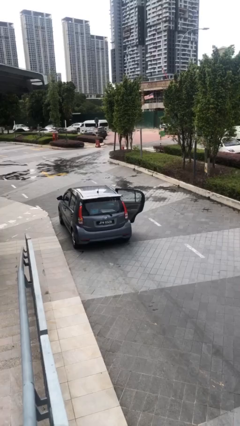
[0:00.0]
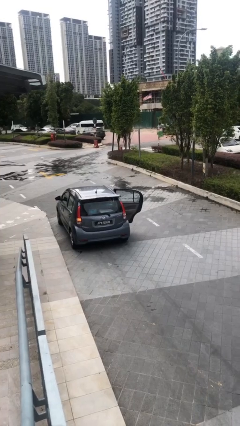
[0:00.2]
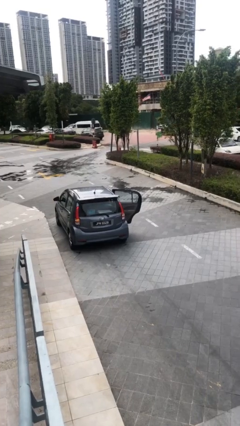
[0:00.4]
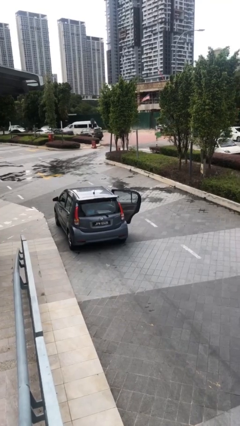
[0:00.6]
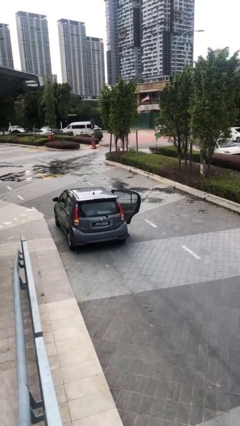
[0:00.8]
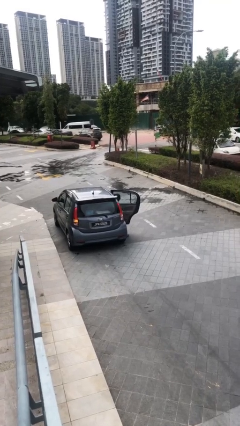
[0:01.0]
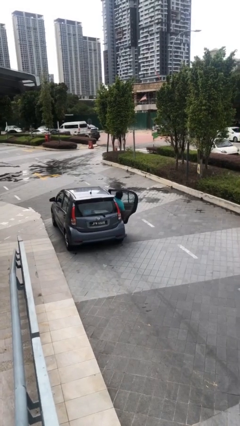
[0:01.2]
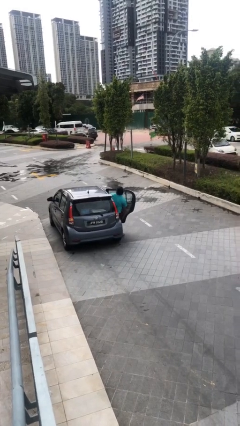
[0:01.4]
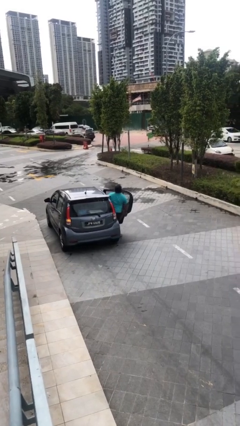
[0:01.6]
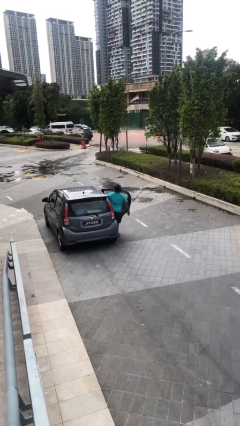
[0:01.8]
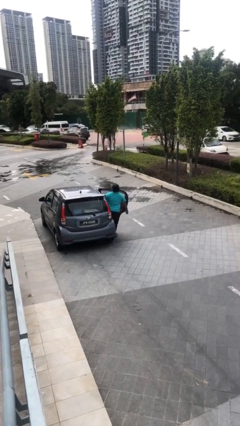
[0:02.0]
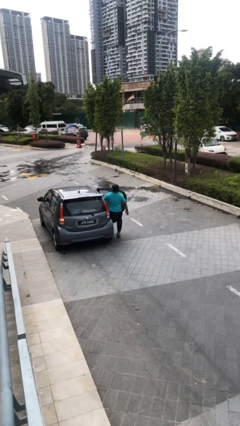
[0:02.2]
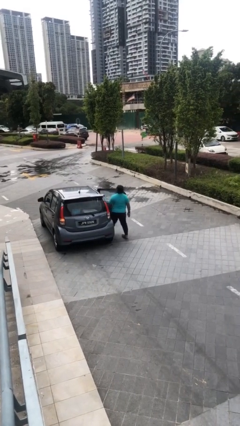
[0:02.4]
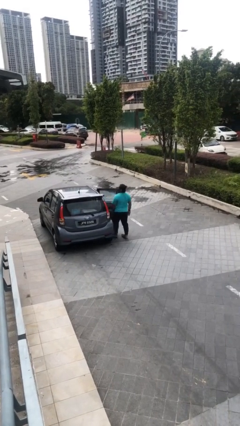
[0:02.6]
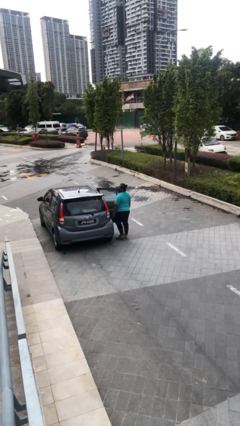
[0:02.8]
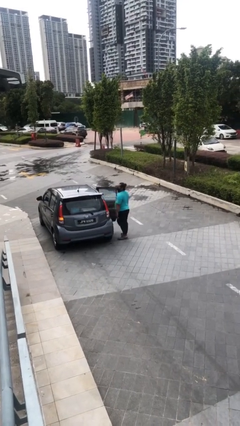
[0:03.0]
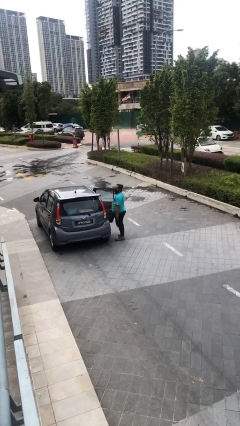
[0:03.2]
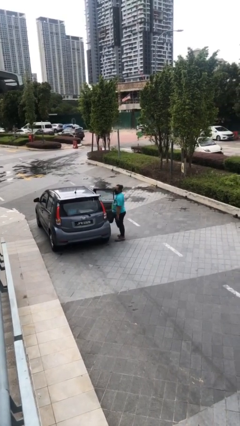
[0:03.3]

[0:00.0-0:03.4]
person exits car

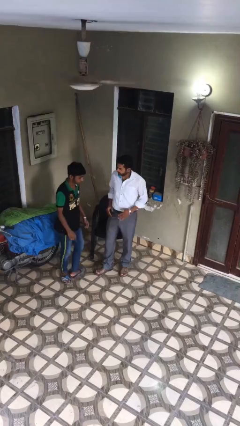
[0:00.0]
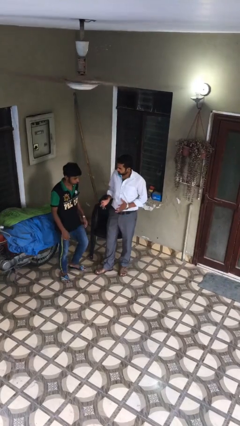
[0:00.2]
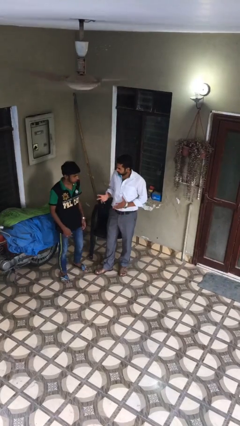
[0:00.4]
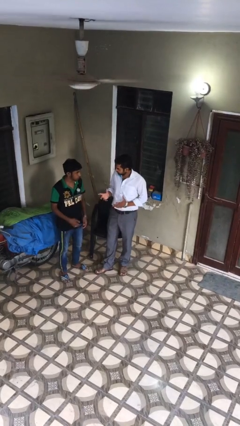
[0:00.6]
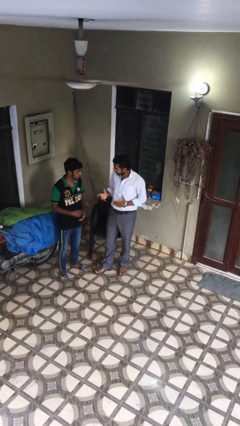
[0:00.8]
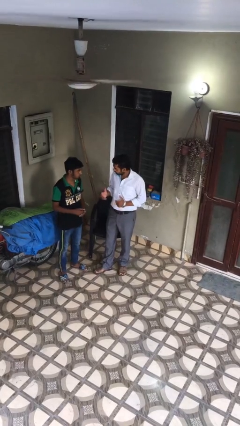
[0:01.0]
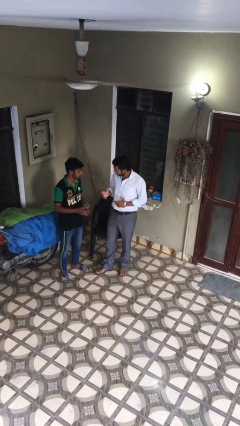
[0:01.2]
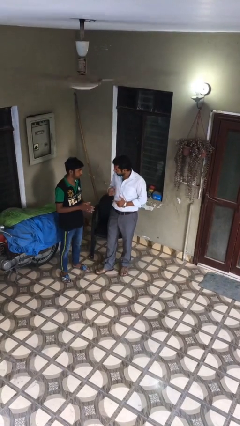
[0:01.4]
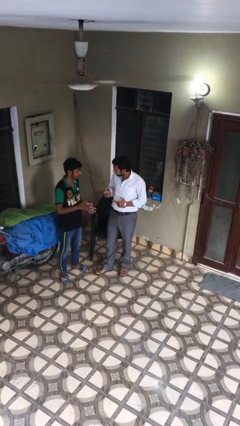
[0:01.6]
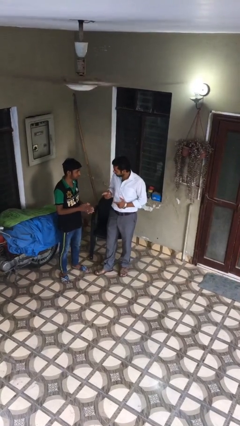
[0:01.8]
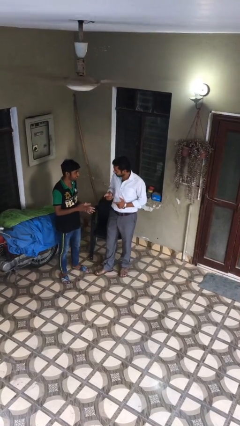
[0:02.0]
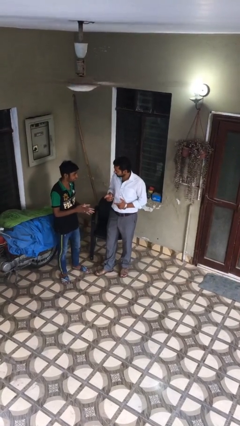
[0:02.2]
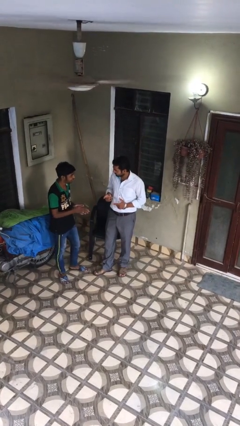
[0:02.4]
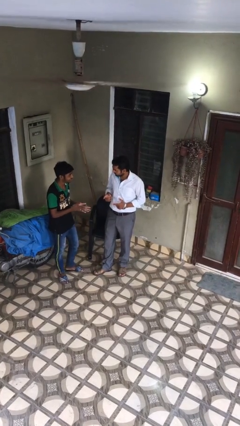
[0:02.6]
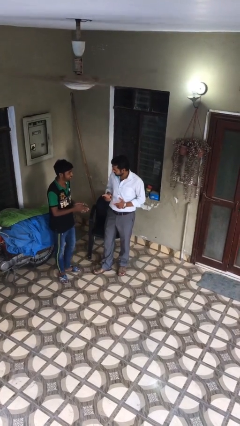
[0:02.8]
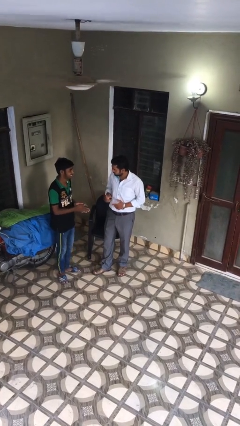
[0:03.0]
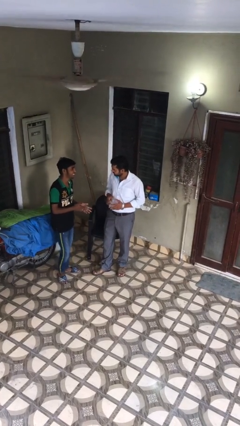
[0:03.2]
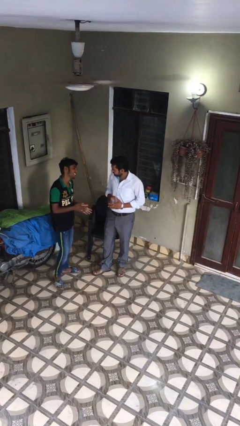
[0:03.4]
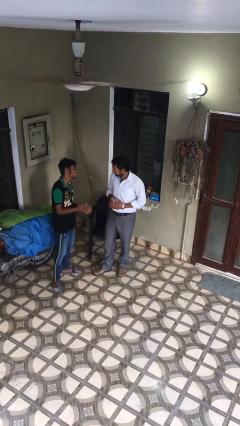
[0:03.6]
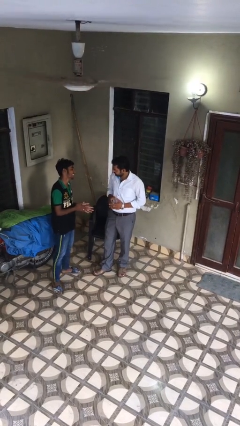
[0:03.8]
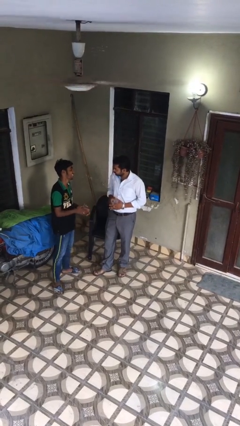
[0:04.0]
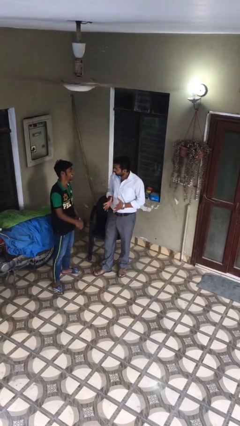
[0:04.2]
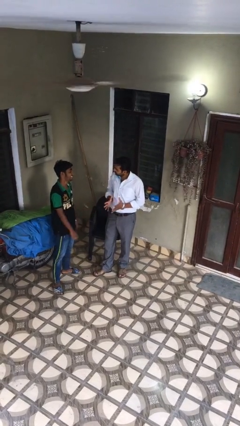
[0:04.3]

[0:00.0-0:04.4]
person talks to person

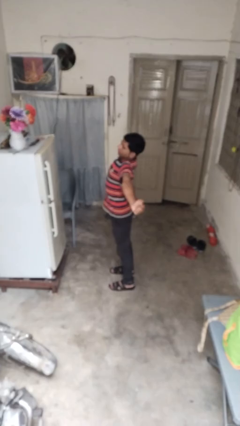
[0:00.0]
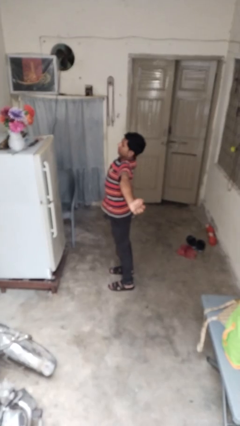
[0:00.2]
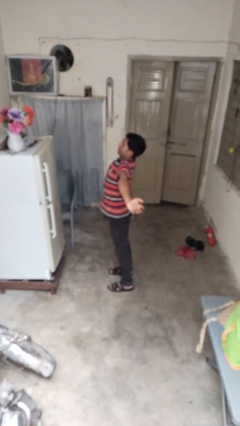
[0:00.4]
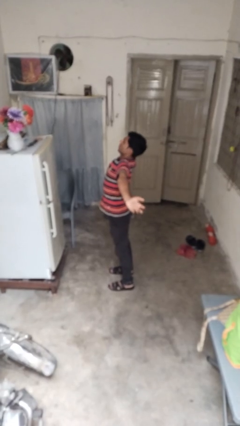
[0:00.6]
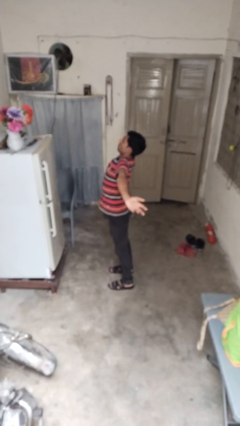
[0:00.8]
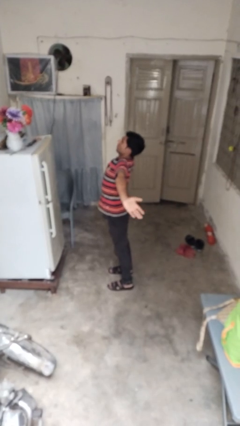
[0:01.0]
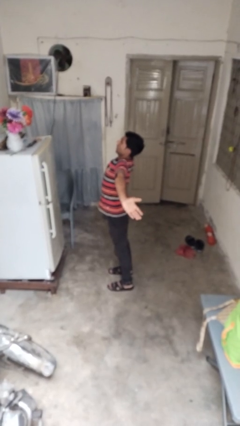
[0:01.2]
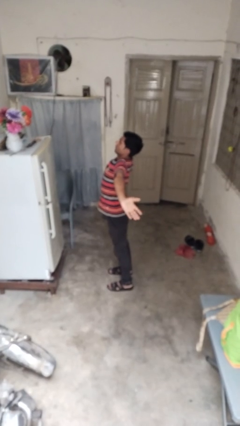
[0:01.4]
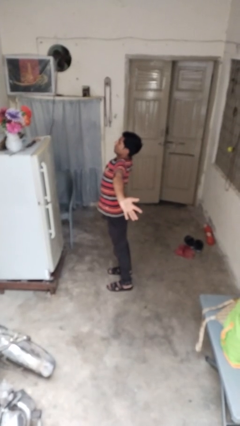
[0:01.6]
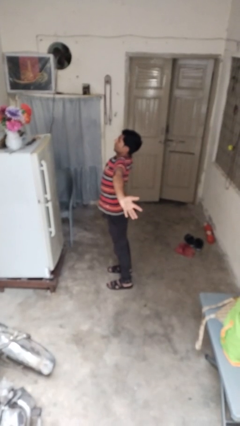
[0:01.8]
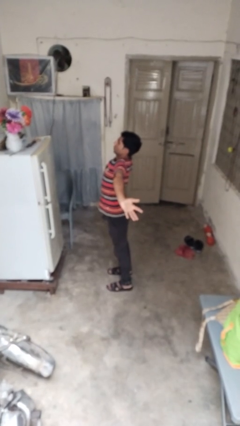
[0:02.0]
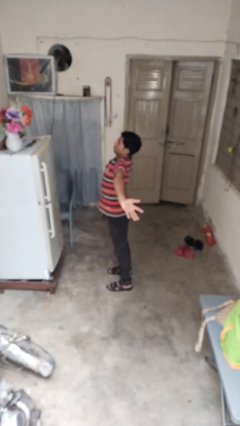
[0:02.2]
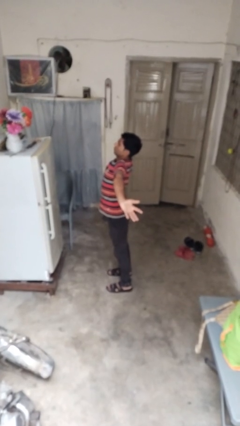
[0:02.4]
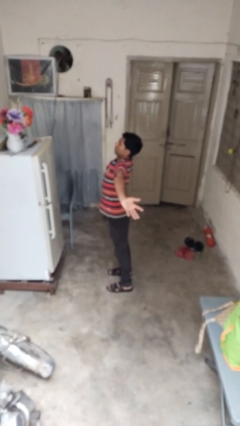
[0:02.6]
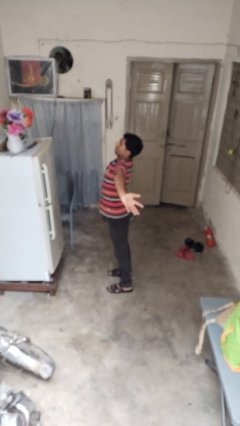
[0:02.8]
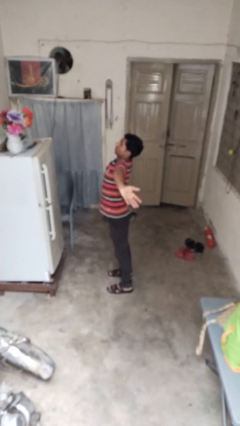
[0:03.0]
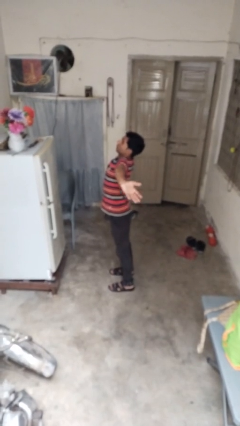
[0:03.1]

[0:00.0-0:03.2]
person stretches arms to side

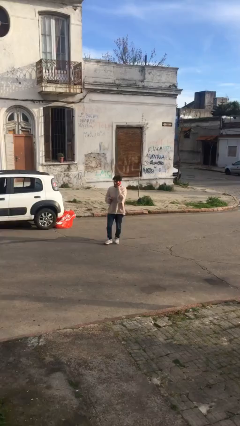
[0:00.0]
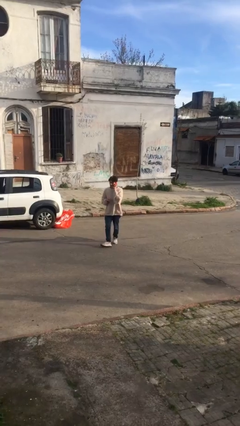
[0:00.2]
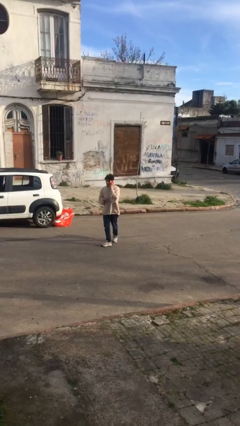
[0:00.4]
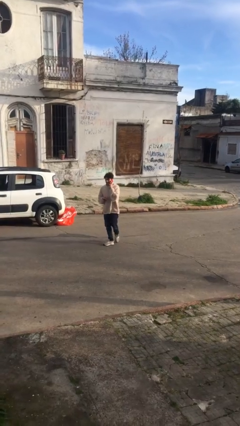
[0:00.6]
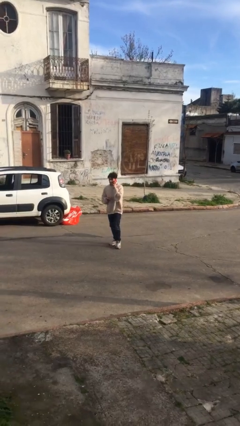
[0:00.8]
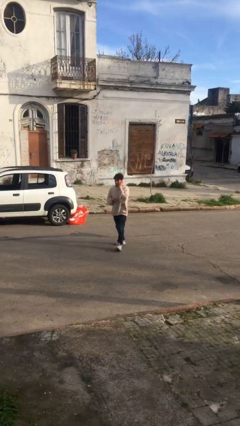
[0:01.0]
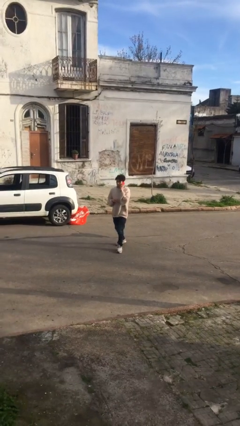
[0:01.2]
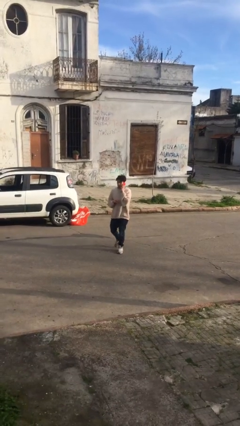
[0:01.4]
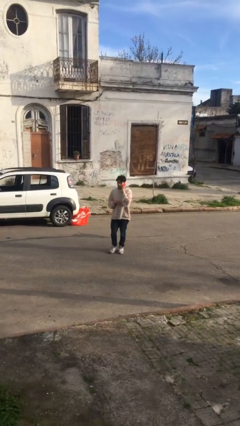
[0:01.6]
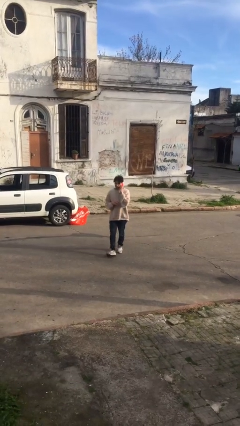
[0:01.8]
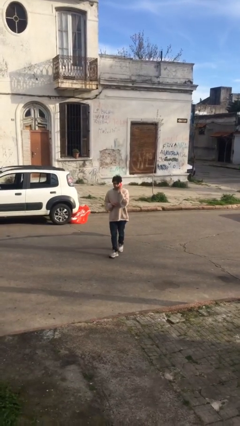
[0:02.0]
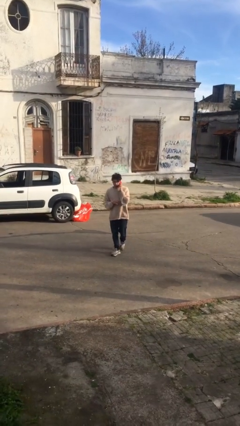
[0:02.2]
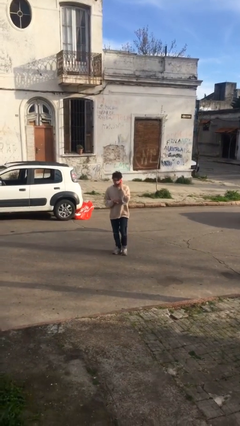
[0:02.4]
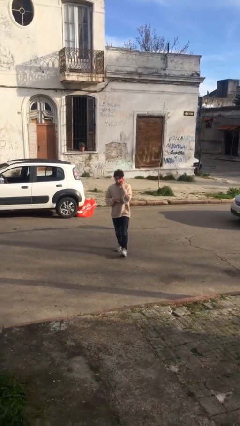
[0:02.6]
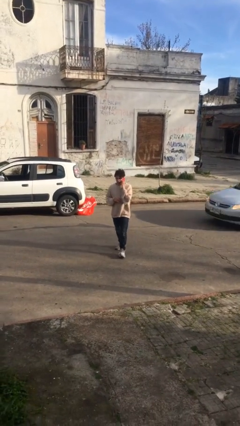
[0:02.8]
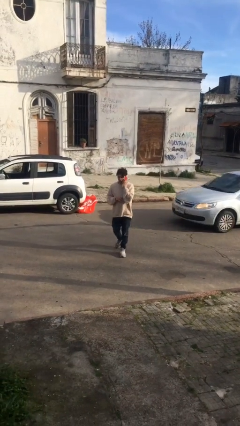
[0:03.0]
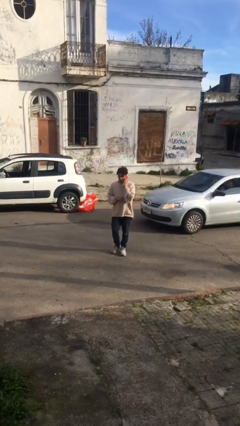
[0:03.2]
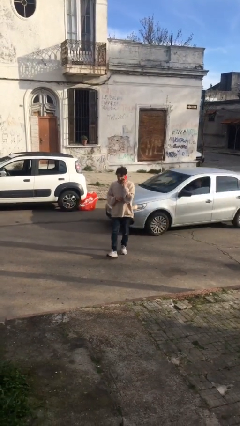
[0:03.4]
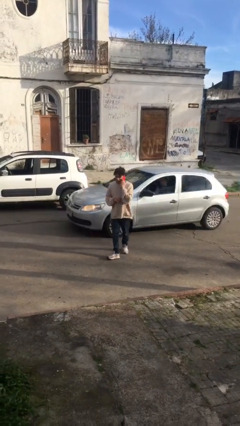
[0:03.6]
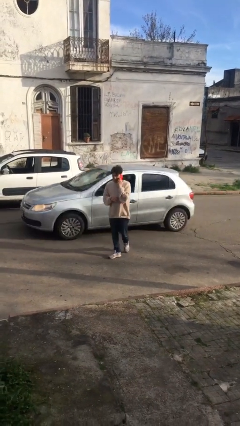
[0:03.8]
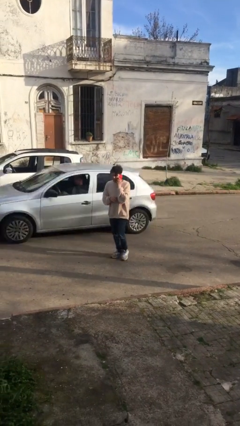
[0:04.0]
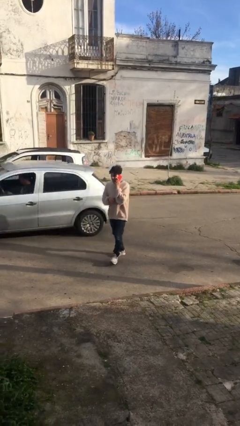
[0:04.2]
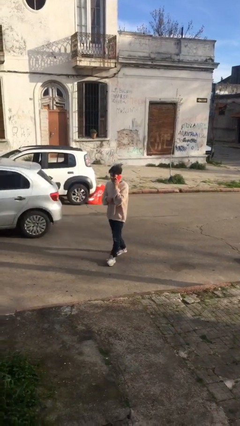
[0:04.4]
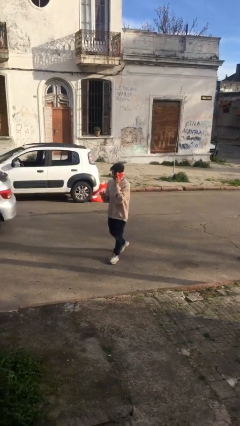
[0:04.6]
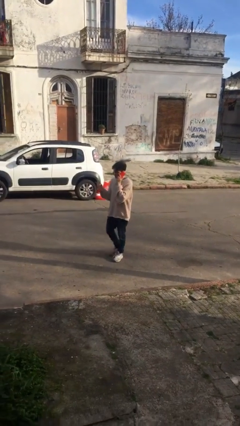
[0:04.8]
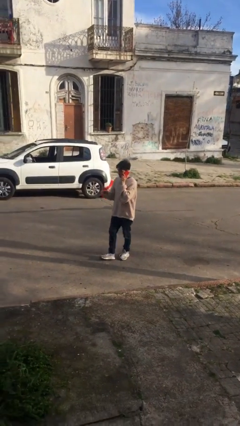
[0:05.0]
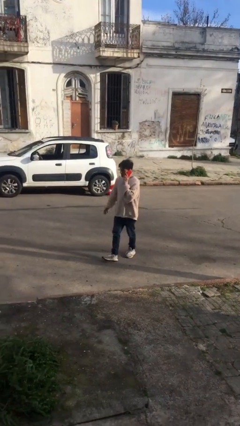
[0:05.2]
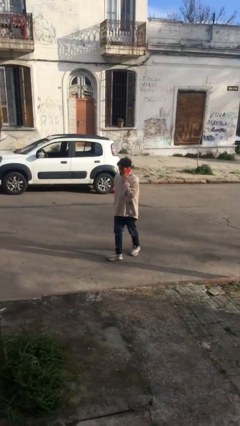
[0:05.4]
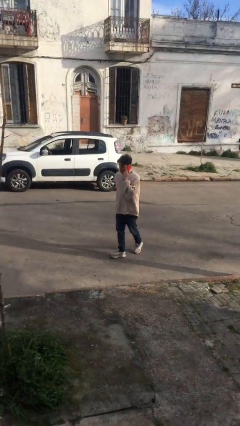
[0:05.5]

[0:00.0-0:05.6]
person talks on phone

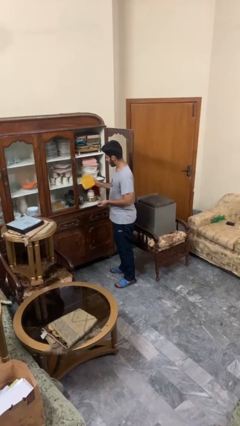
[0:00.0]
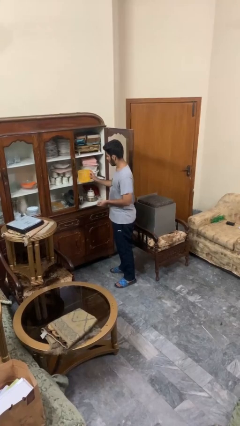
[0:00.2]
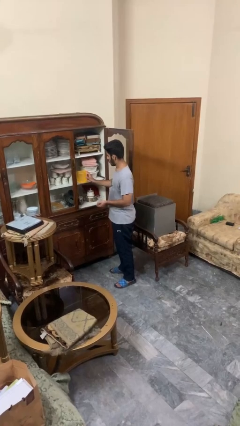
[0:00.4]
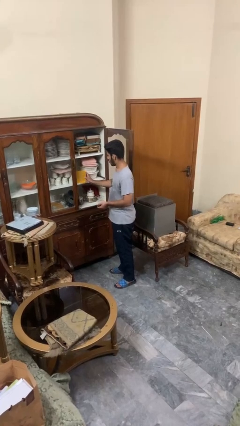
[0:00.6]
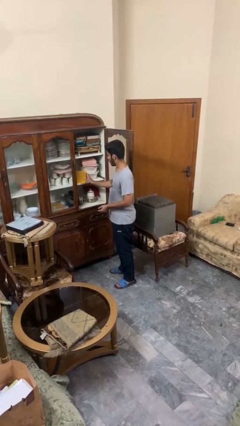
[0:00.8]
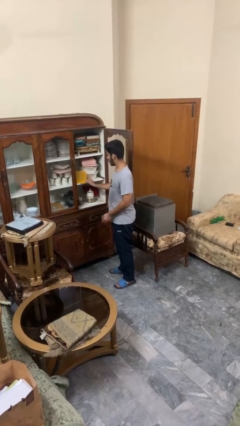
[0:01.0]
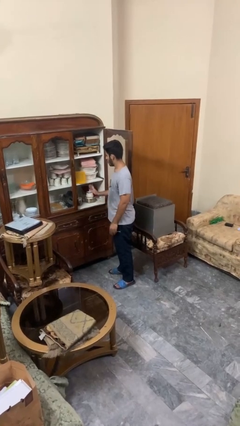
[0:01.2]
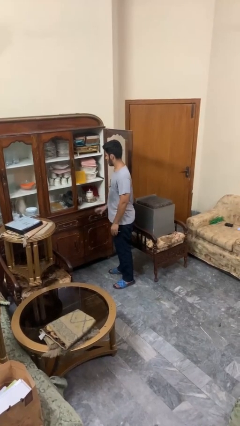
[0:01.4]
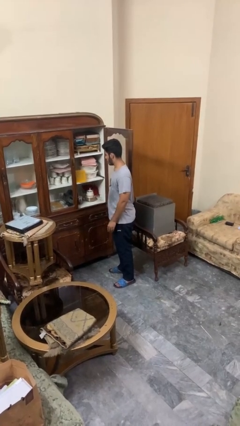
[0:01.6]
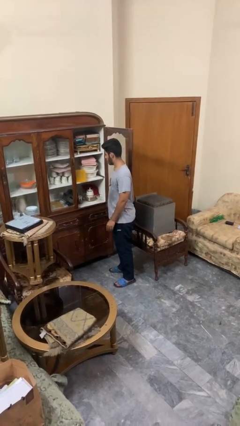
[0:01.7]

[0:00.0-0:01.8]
person puts down object into cabinet
